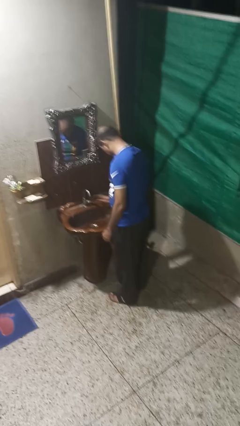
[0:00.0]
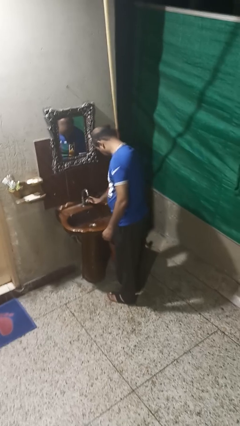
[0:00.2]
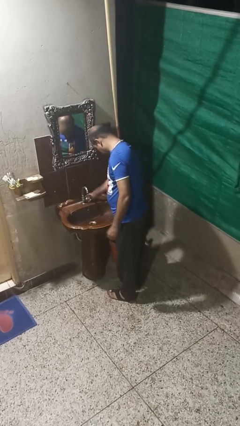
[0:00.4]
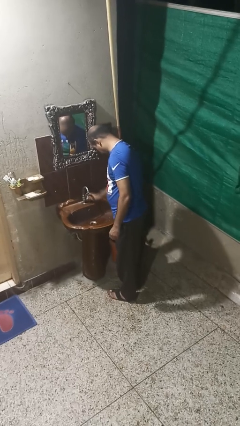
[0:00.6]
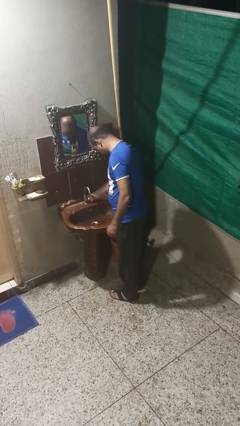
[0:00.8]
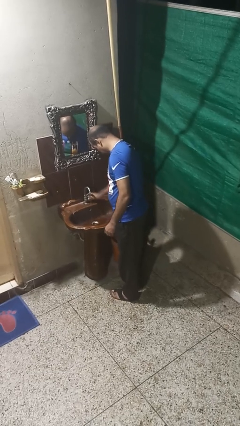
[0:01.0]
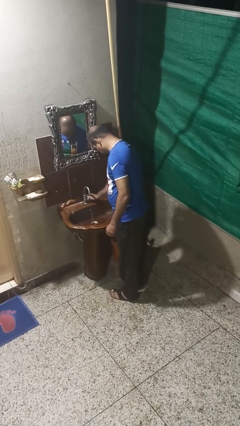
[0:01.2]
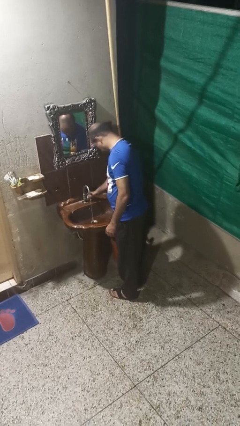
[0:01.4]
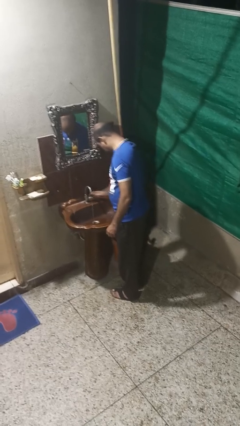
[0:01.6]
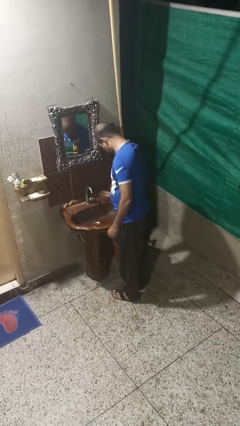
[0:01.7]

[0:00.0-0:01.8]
person turns off faucet

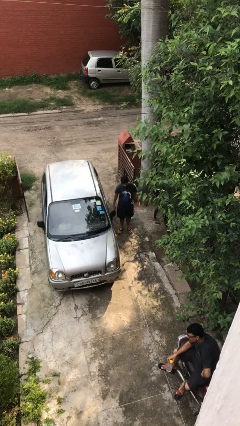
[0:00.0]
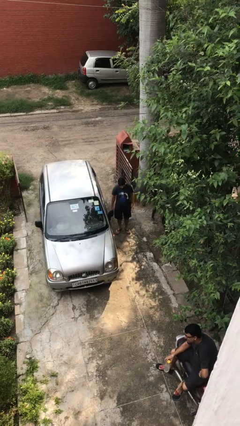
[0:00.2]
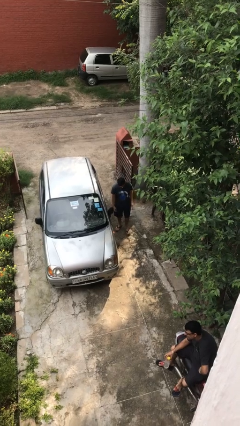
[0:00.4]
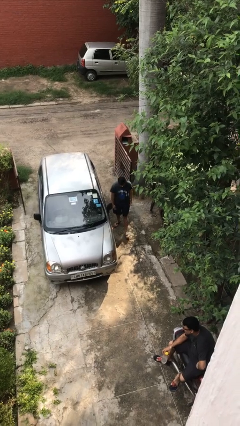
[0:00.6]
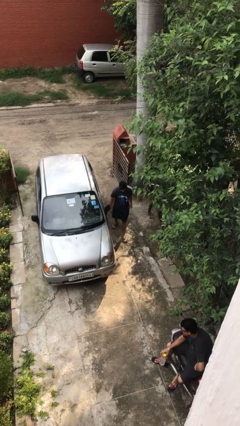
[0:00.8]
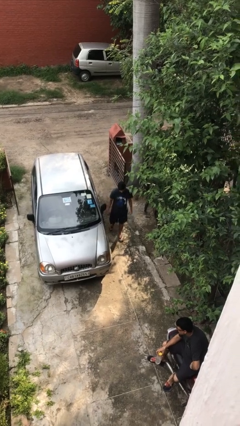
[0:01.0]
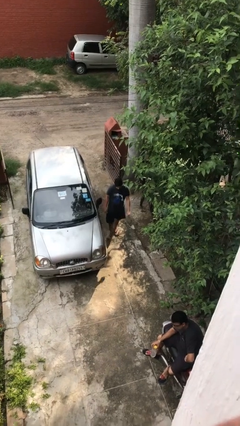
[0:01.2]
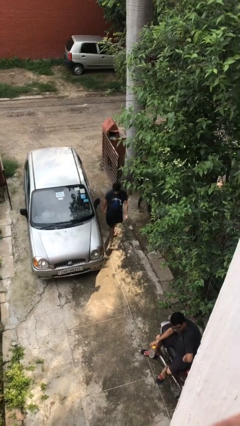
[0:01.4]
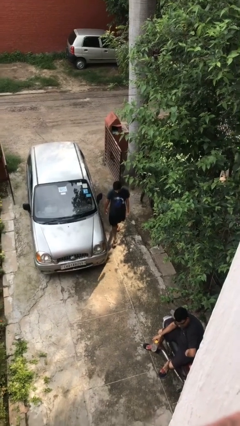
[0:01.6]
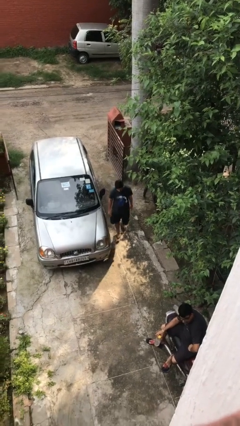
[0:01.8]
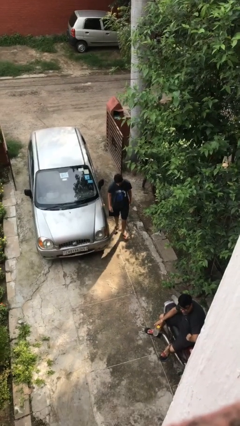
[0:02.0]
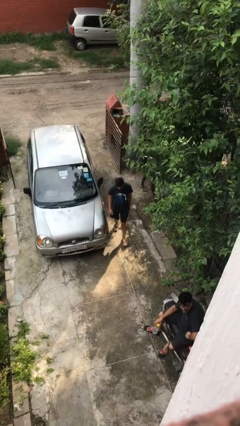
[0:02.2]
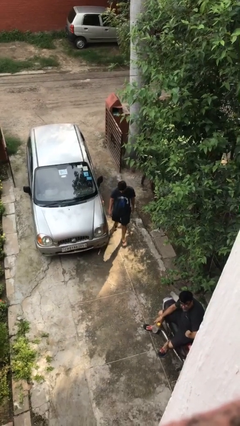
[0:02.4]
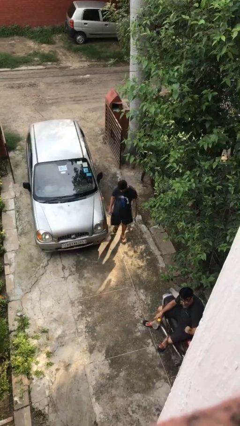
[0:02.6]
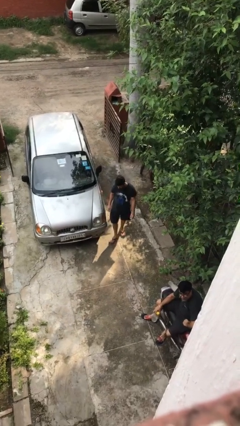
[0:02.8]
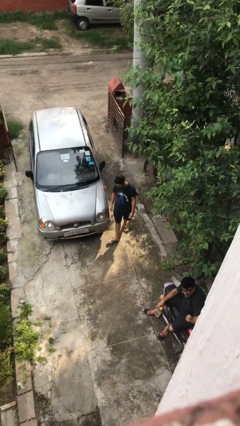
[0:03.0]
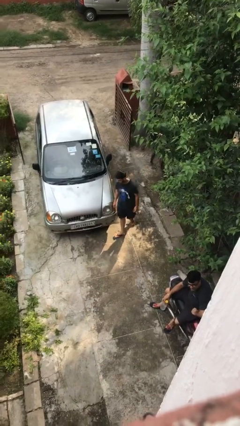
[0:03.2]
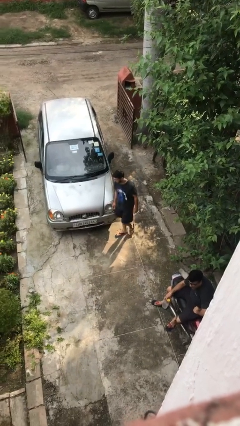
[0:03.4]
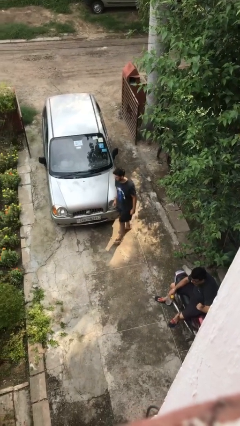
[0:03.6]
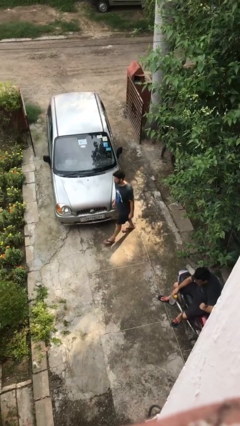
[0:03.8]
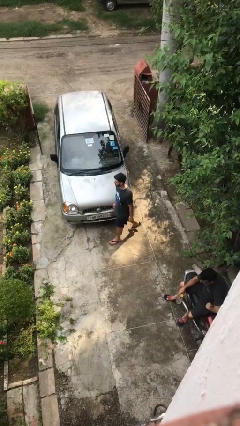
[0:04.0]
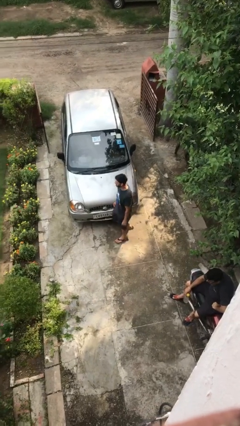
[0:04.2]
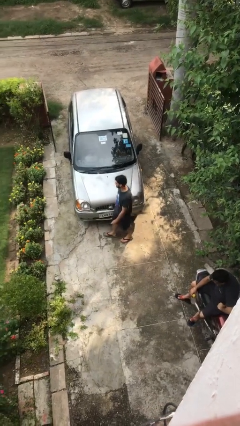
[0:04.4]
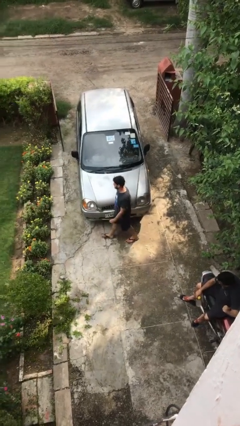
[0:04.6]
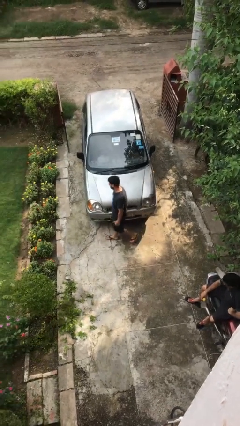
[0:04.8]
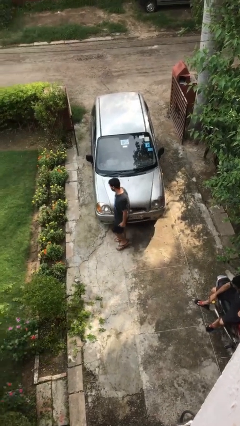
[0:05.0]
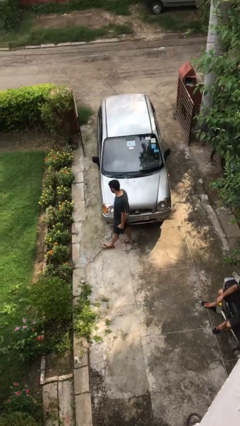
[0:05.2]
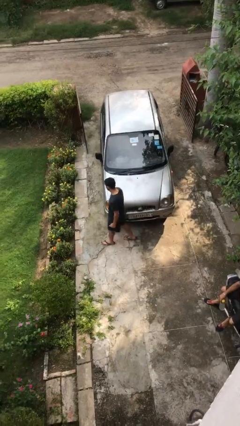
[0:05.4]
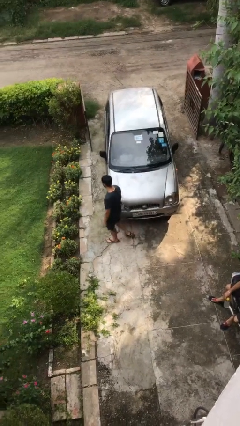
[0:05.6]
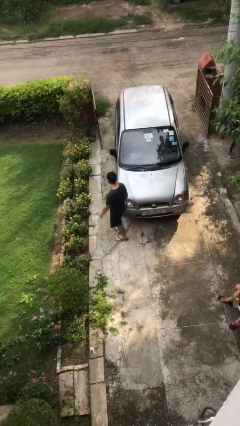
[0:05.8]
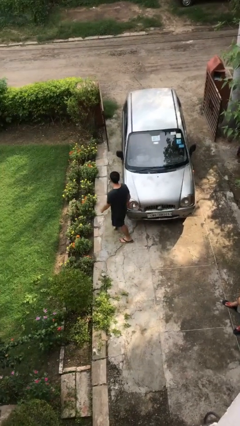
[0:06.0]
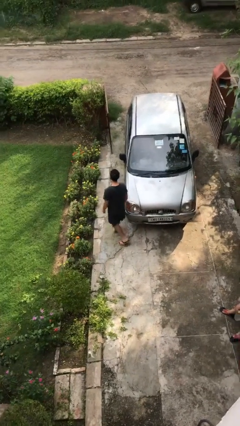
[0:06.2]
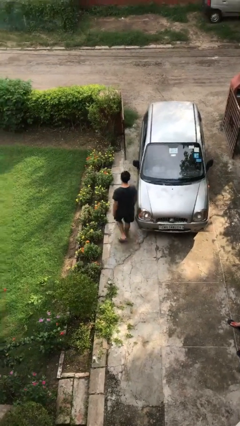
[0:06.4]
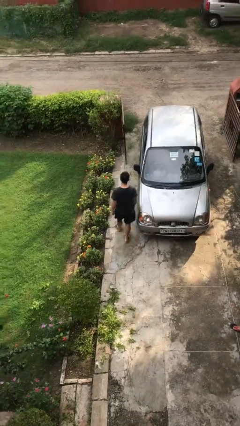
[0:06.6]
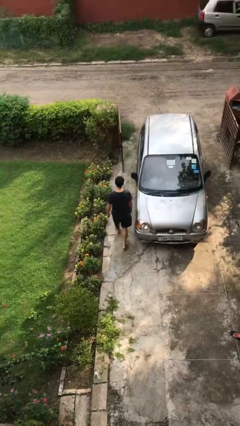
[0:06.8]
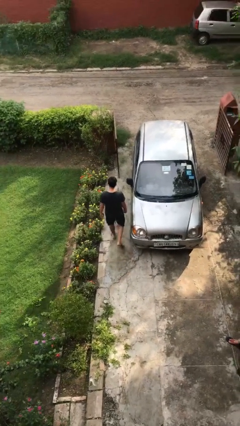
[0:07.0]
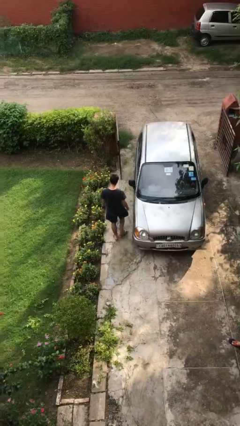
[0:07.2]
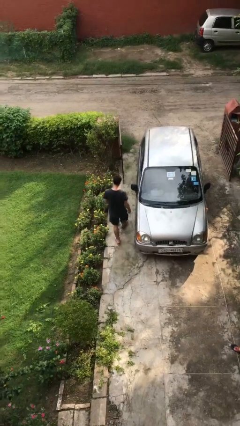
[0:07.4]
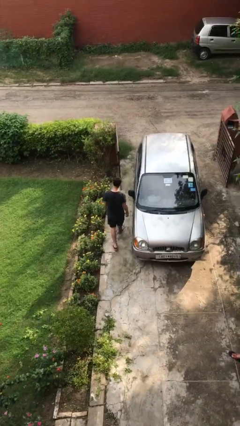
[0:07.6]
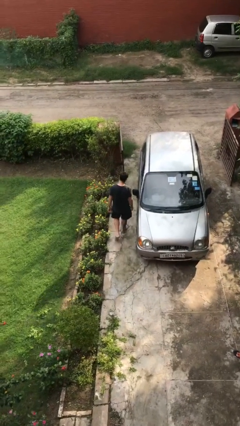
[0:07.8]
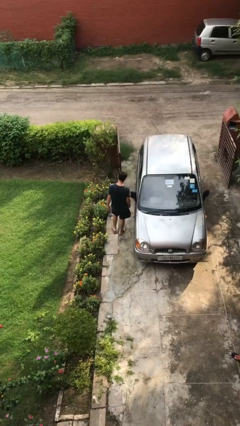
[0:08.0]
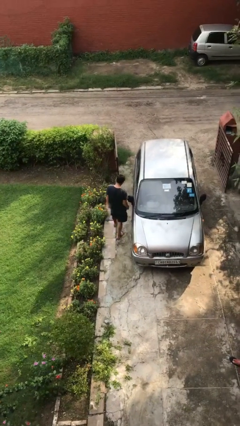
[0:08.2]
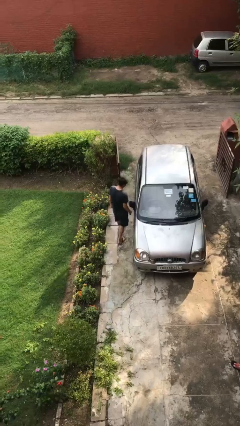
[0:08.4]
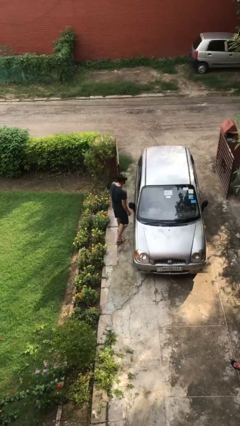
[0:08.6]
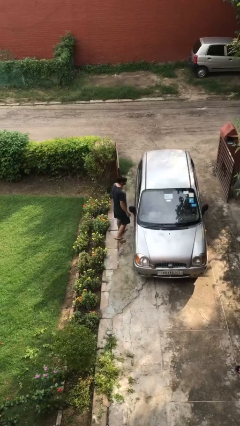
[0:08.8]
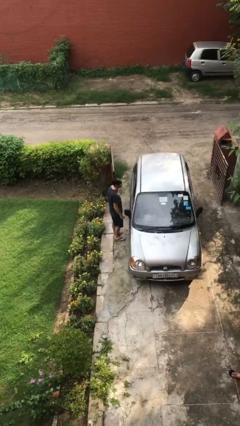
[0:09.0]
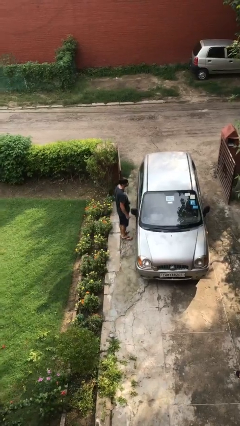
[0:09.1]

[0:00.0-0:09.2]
person walks around car

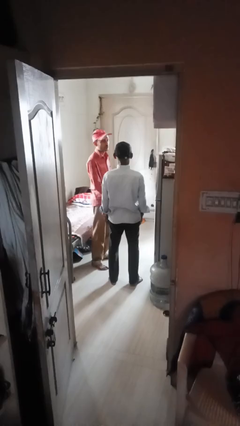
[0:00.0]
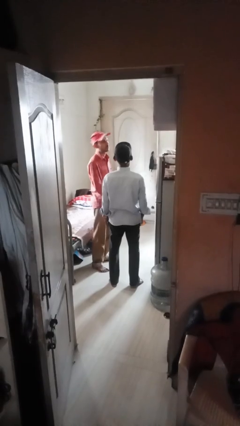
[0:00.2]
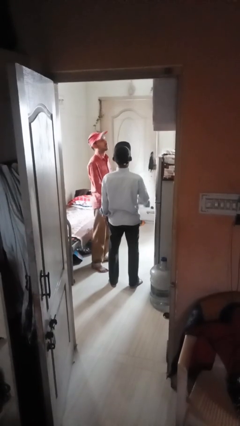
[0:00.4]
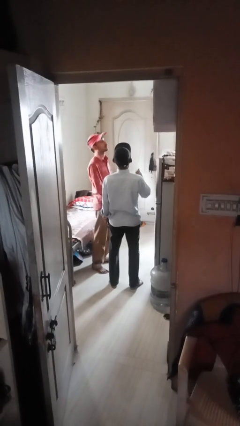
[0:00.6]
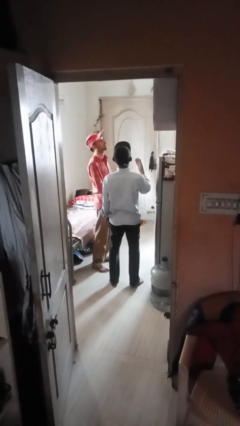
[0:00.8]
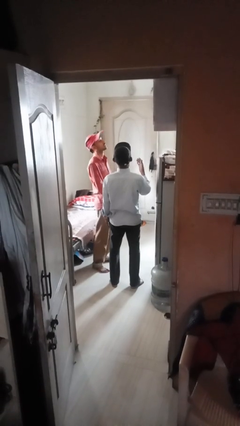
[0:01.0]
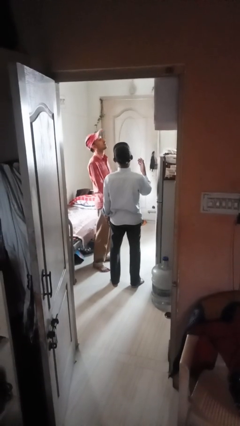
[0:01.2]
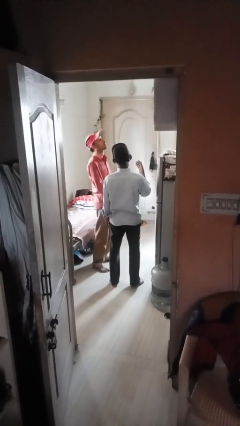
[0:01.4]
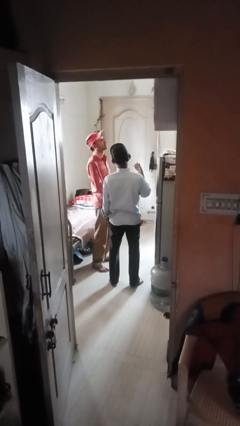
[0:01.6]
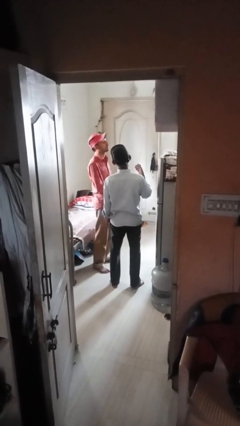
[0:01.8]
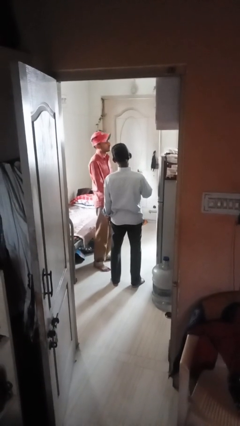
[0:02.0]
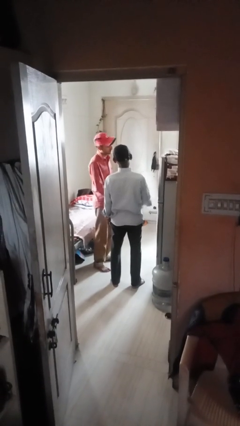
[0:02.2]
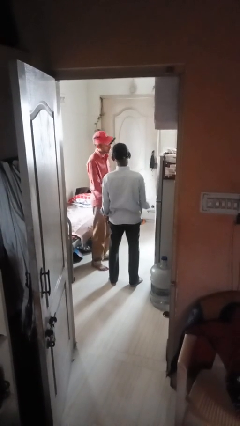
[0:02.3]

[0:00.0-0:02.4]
person laughs with person

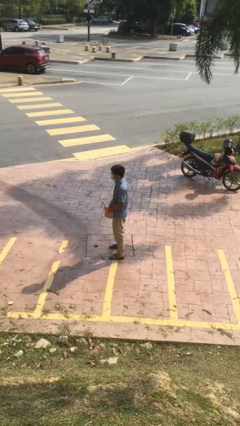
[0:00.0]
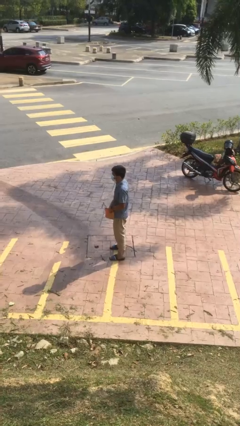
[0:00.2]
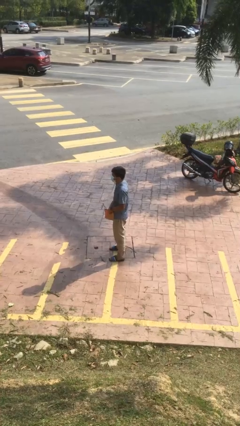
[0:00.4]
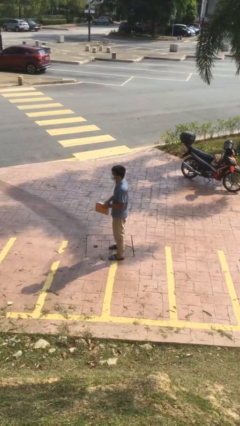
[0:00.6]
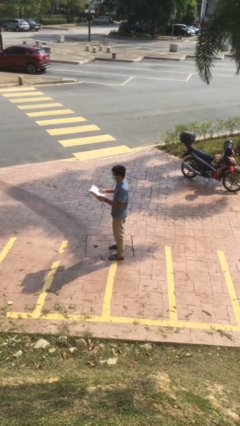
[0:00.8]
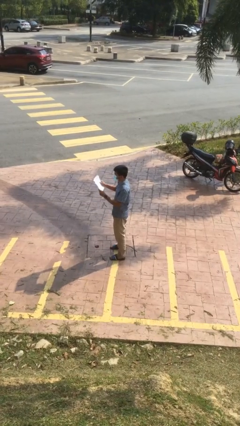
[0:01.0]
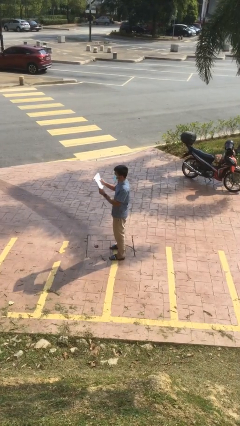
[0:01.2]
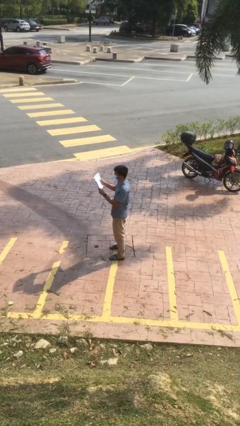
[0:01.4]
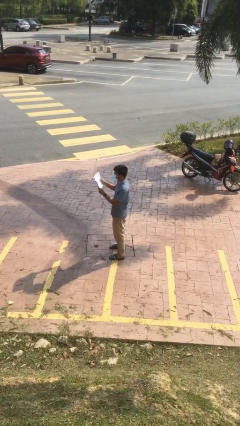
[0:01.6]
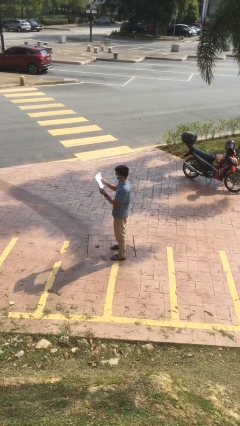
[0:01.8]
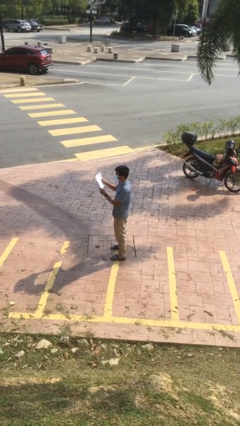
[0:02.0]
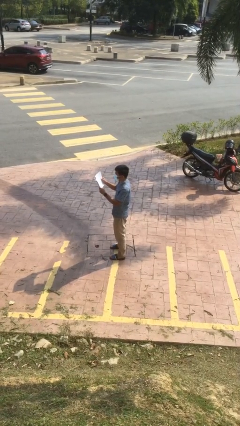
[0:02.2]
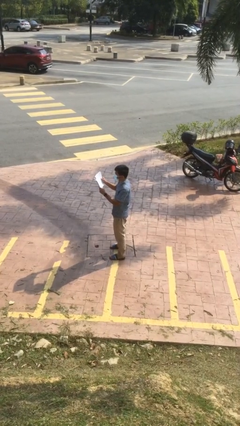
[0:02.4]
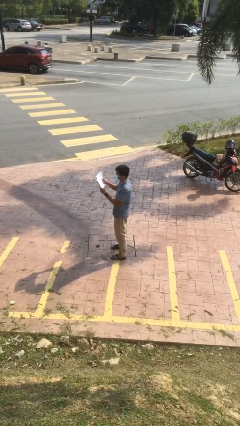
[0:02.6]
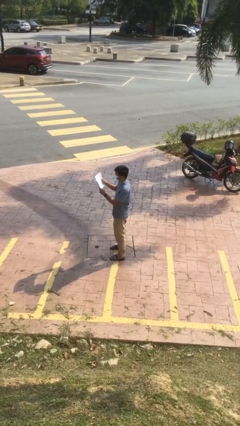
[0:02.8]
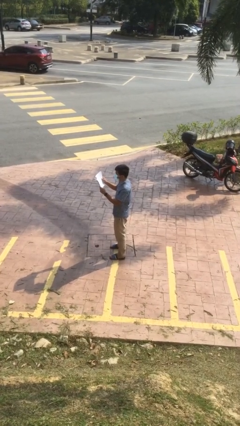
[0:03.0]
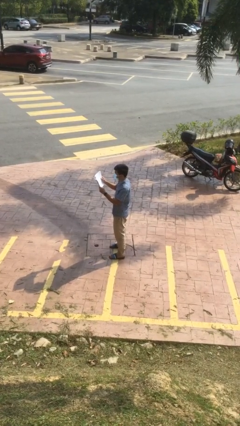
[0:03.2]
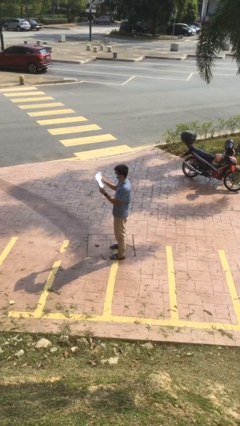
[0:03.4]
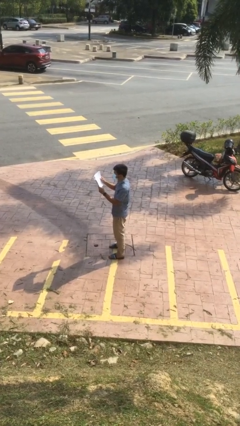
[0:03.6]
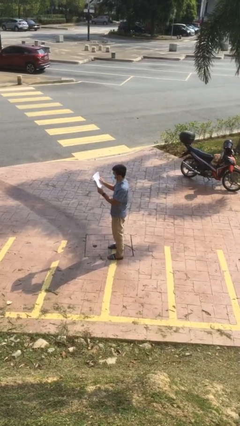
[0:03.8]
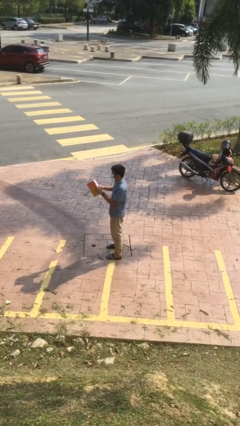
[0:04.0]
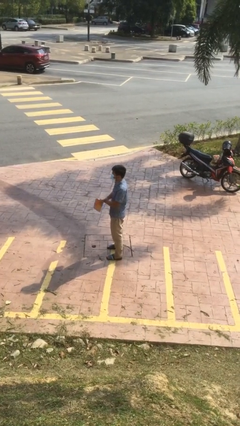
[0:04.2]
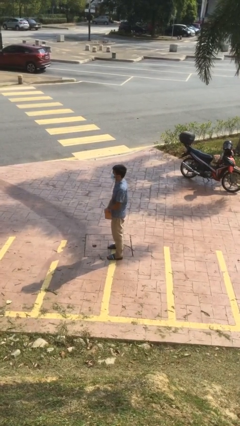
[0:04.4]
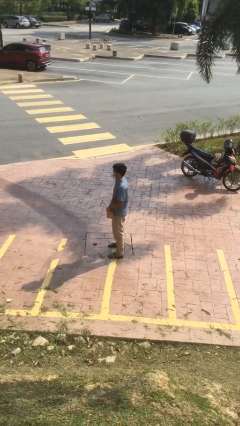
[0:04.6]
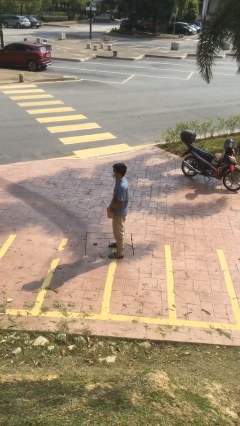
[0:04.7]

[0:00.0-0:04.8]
person reads document
